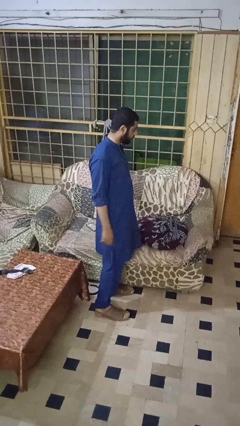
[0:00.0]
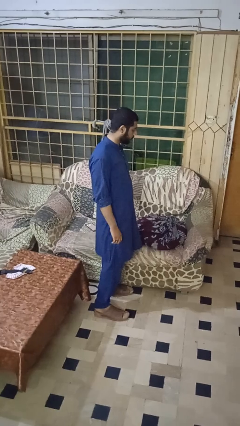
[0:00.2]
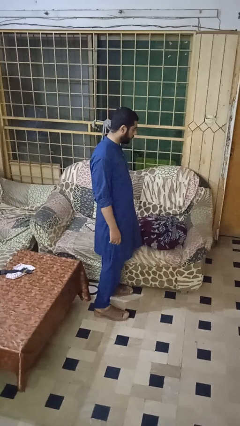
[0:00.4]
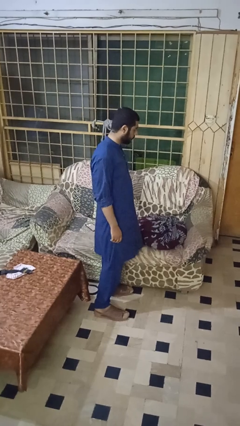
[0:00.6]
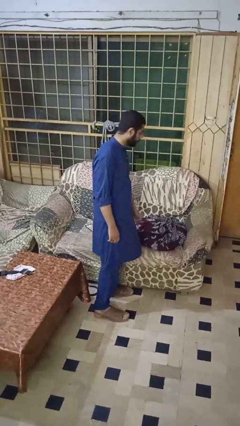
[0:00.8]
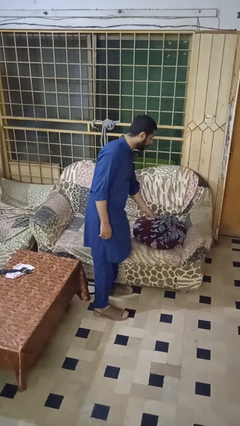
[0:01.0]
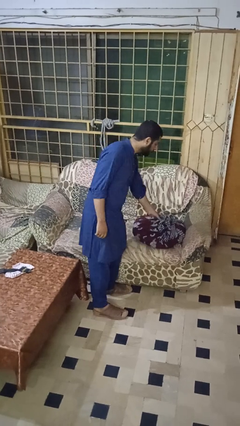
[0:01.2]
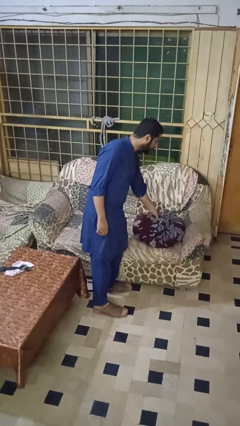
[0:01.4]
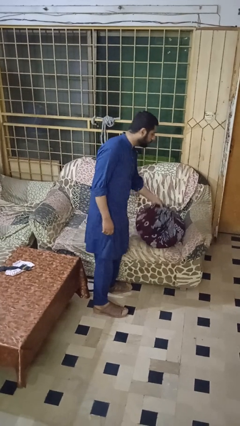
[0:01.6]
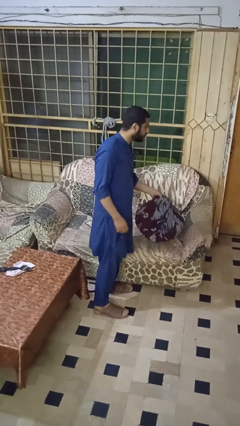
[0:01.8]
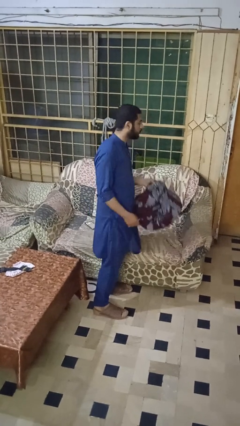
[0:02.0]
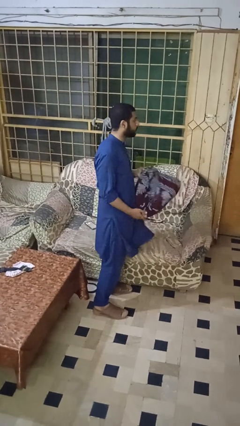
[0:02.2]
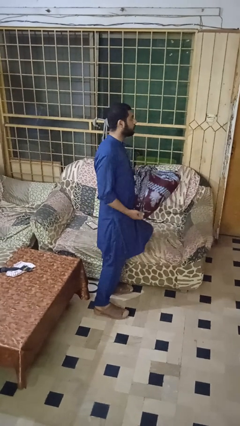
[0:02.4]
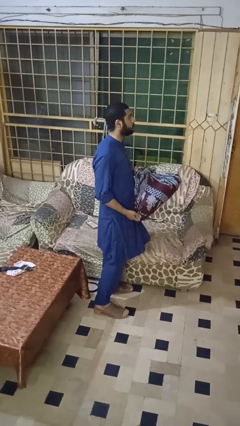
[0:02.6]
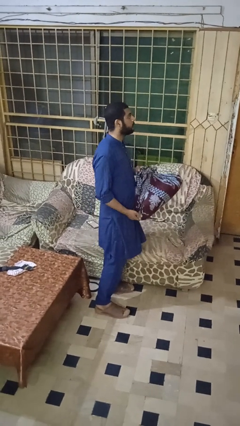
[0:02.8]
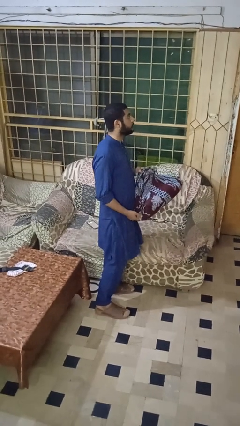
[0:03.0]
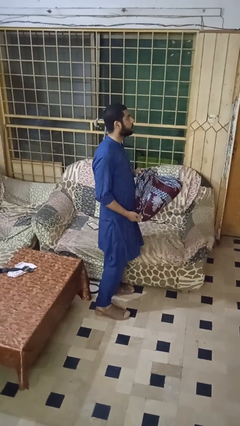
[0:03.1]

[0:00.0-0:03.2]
person picks up object from couch

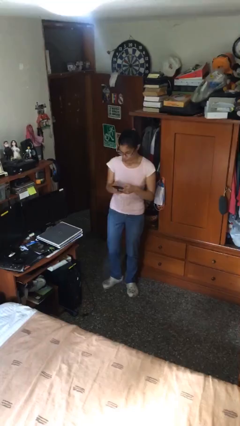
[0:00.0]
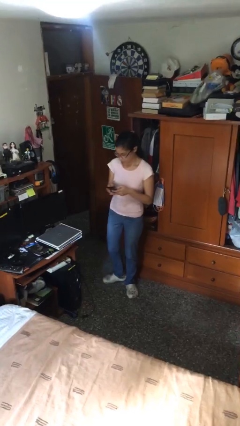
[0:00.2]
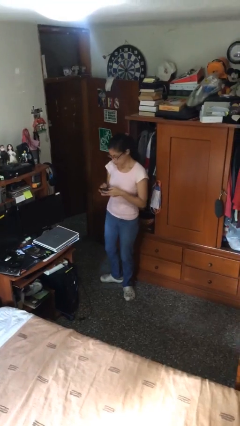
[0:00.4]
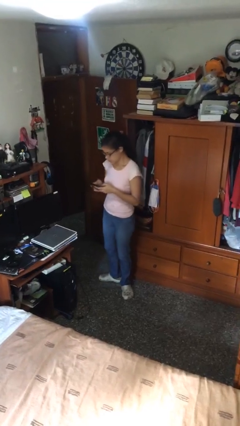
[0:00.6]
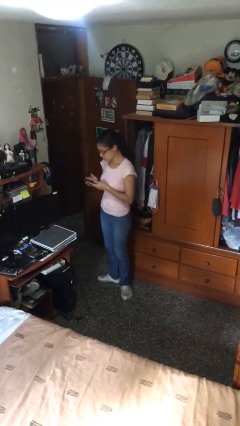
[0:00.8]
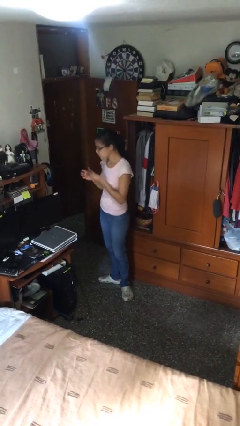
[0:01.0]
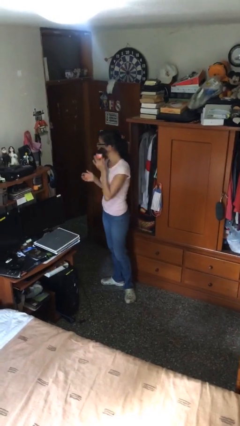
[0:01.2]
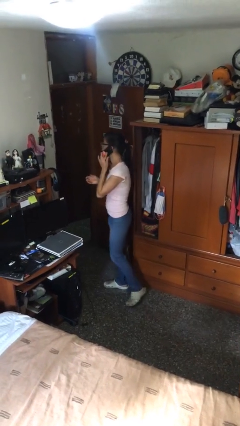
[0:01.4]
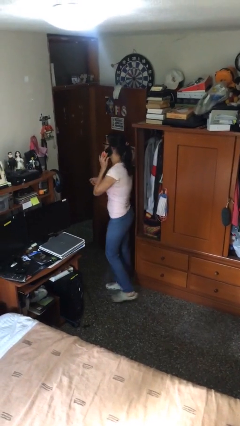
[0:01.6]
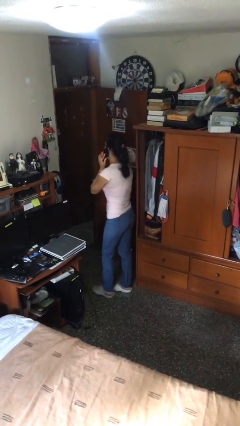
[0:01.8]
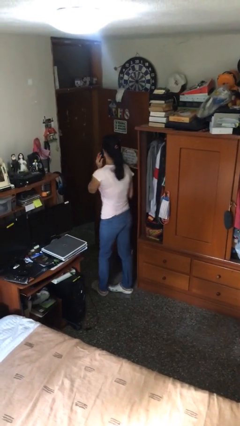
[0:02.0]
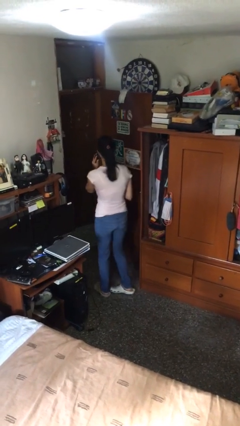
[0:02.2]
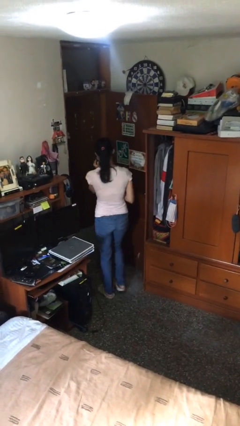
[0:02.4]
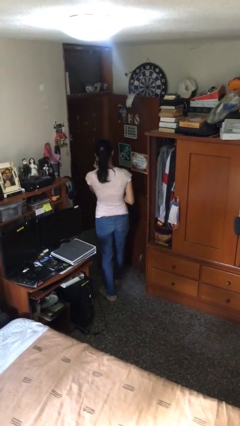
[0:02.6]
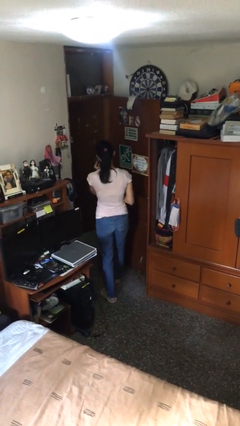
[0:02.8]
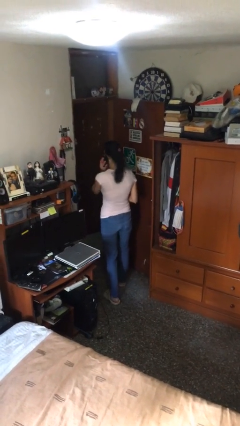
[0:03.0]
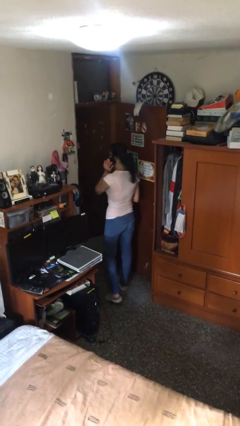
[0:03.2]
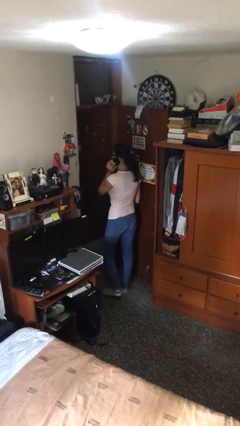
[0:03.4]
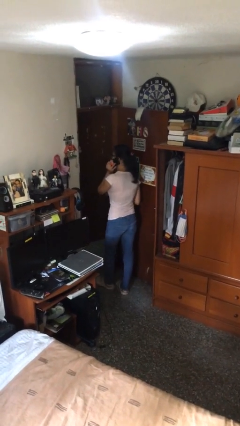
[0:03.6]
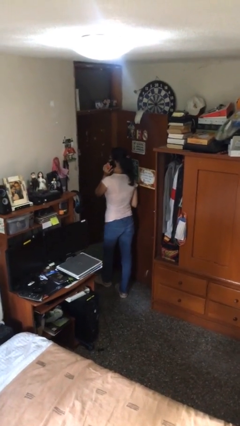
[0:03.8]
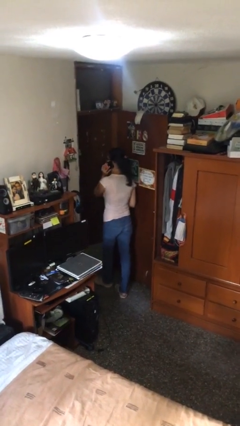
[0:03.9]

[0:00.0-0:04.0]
person talks on phone

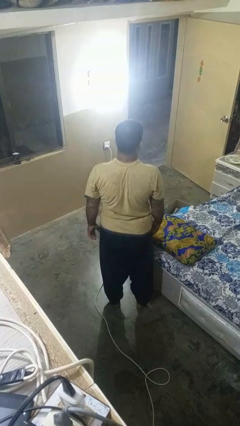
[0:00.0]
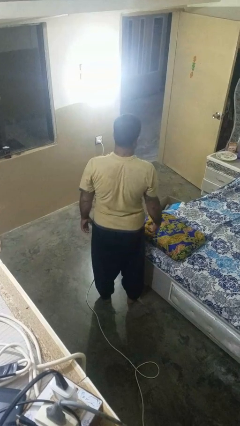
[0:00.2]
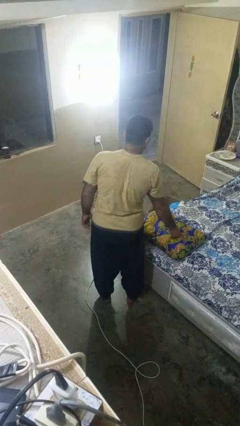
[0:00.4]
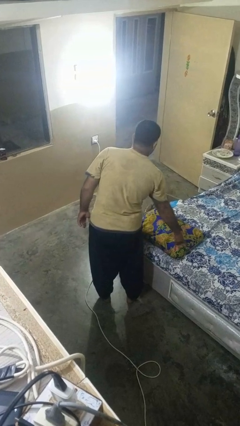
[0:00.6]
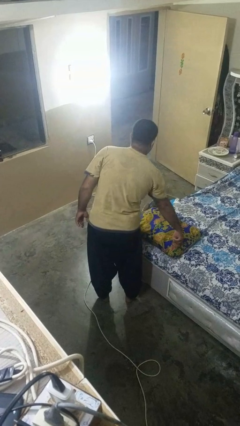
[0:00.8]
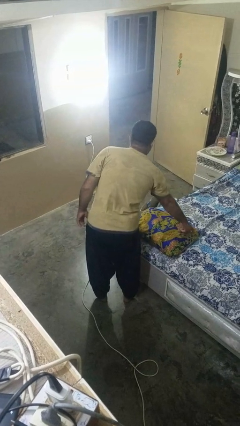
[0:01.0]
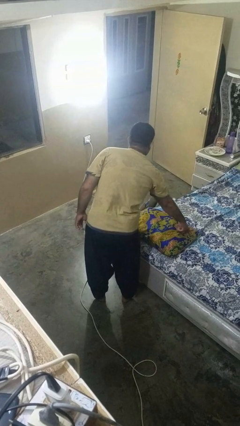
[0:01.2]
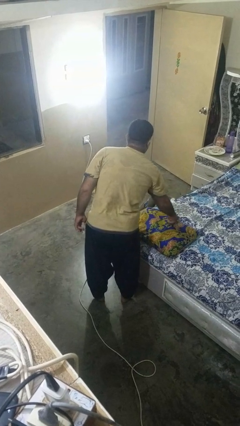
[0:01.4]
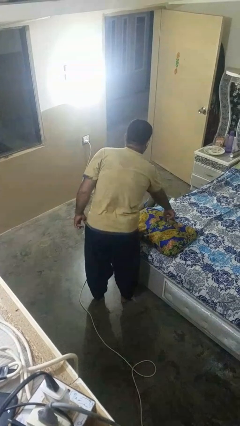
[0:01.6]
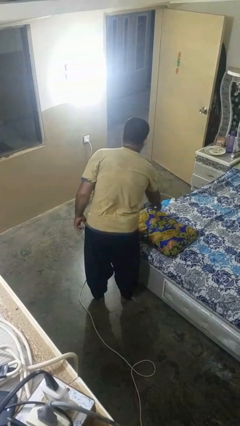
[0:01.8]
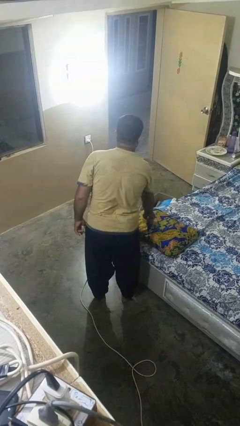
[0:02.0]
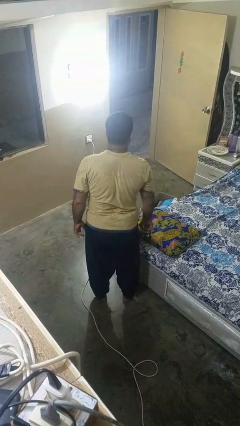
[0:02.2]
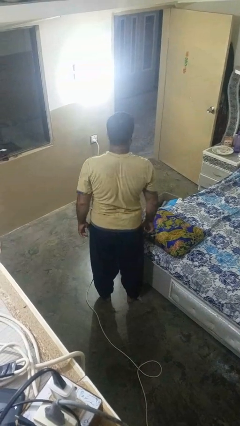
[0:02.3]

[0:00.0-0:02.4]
person taps object with finger

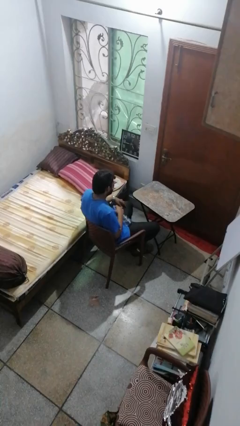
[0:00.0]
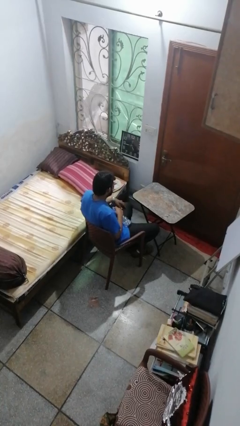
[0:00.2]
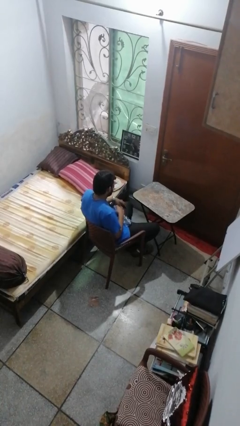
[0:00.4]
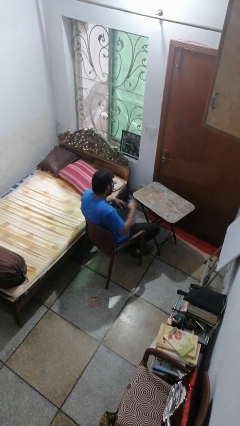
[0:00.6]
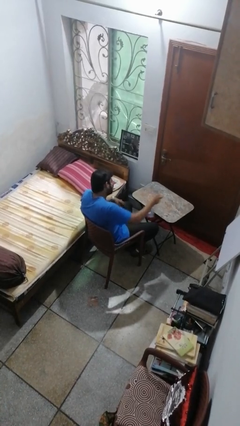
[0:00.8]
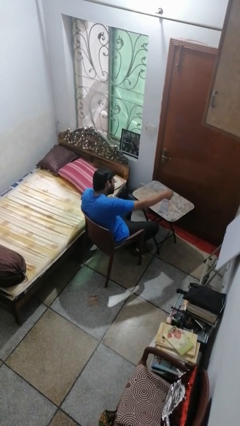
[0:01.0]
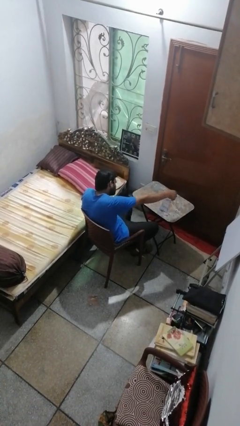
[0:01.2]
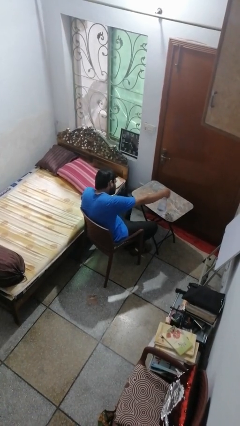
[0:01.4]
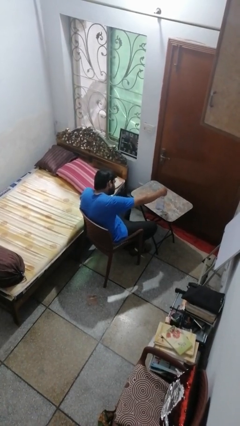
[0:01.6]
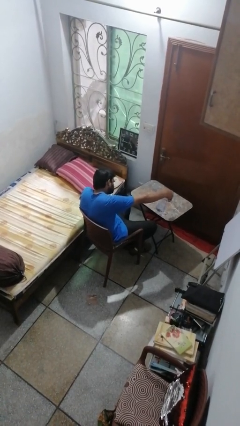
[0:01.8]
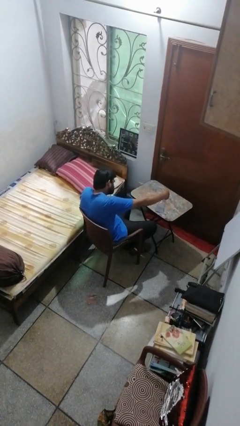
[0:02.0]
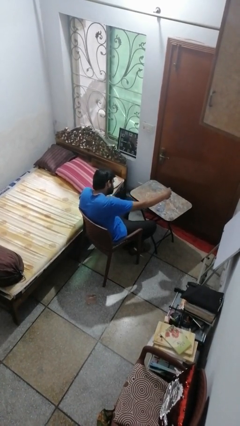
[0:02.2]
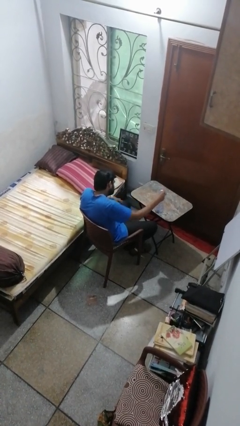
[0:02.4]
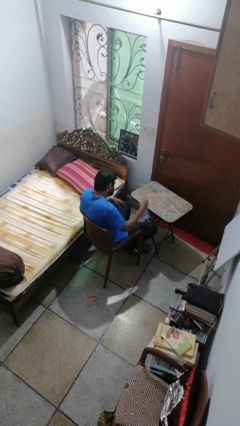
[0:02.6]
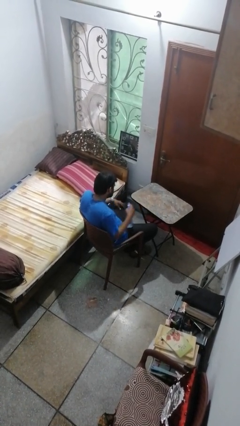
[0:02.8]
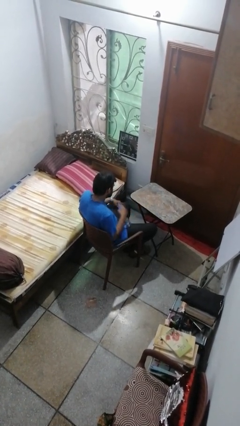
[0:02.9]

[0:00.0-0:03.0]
person sprays from bottle

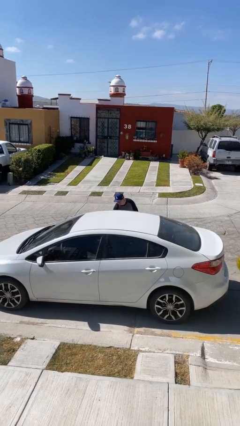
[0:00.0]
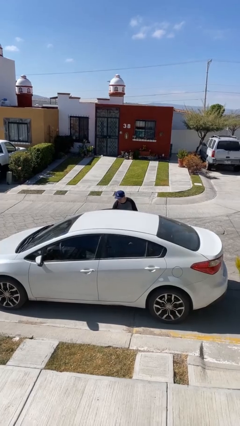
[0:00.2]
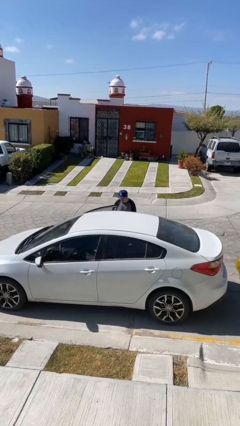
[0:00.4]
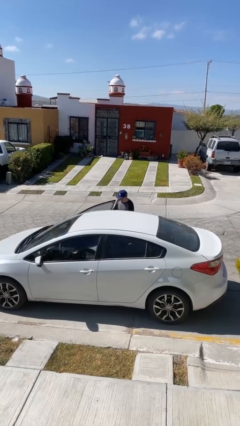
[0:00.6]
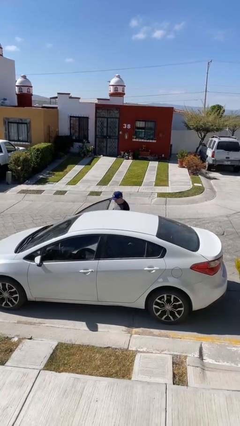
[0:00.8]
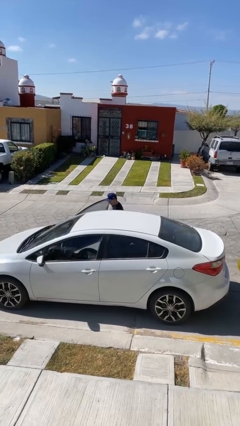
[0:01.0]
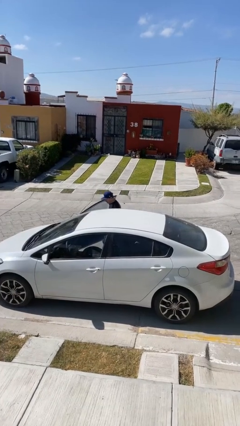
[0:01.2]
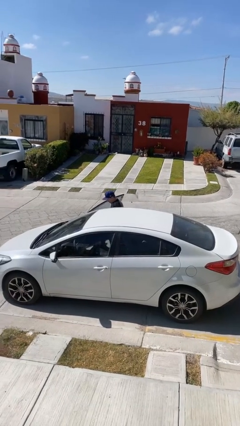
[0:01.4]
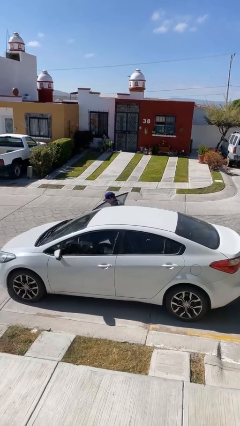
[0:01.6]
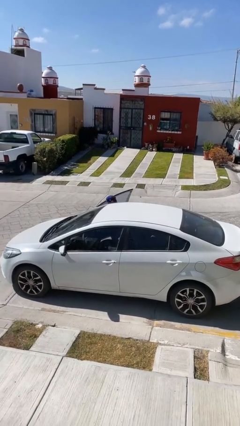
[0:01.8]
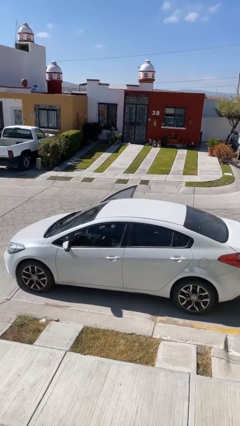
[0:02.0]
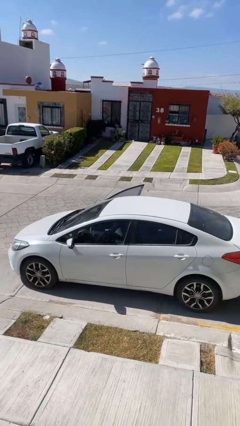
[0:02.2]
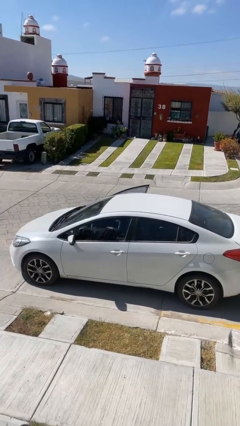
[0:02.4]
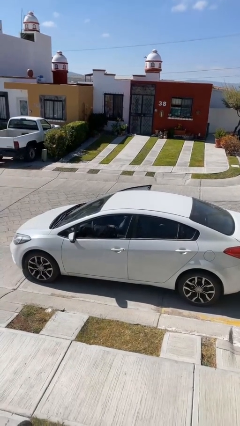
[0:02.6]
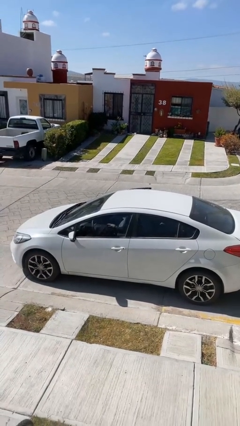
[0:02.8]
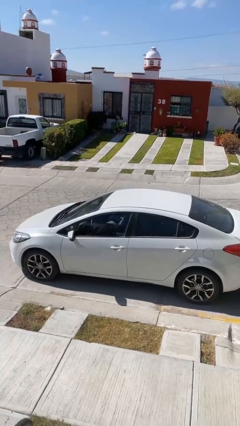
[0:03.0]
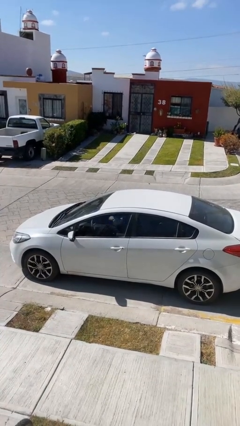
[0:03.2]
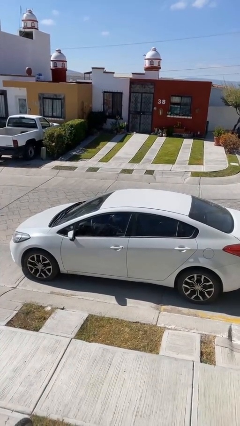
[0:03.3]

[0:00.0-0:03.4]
car picks up person

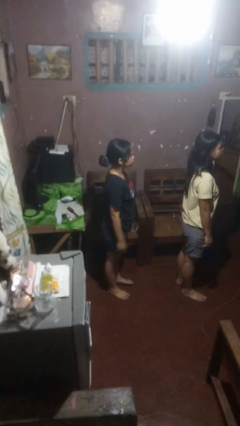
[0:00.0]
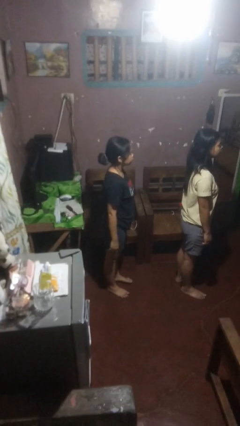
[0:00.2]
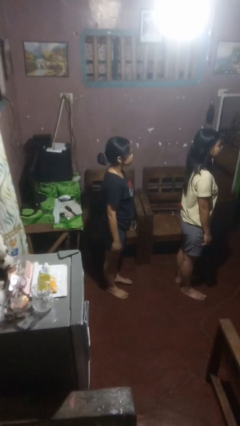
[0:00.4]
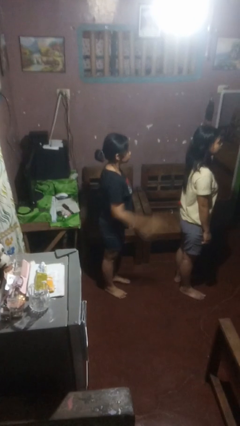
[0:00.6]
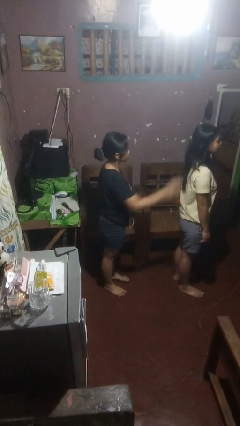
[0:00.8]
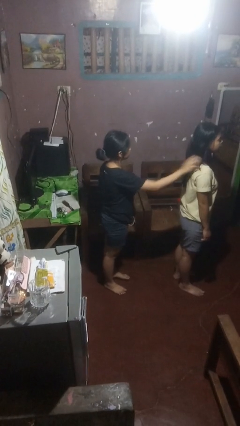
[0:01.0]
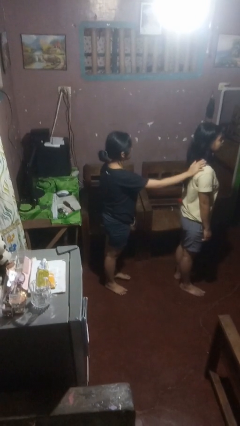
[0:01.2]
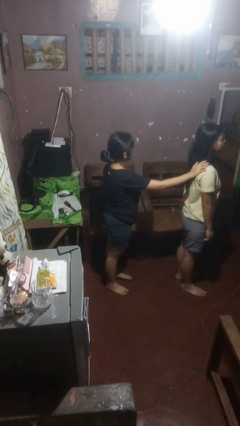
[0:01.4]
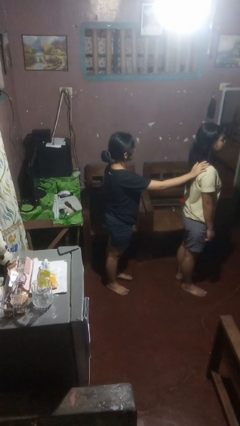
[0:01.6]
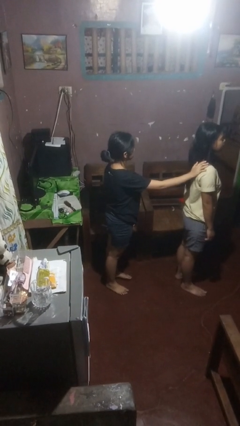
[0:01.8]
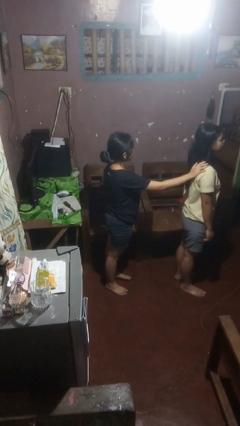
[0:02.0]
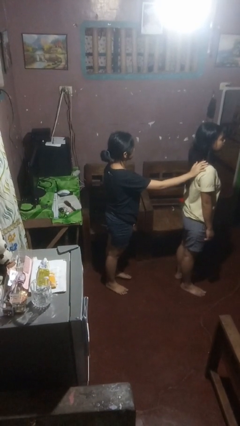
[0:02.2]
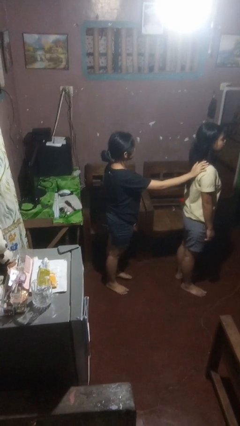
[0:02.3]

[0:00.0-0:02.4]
person touches back of person
